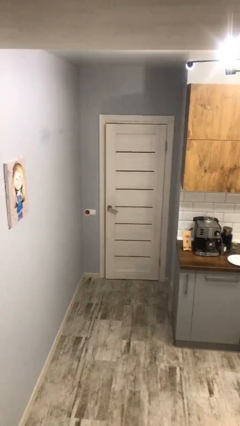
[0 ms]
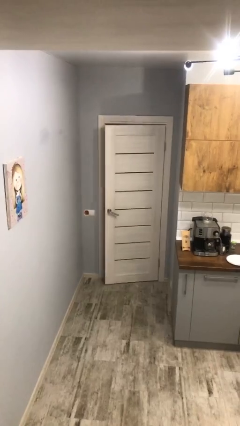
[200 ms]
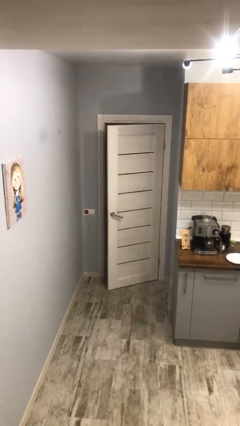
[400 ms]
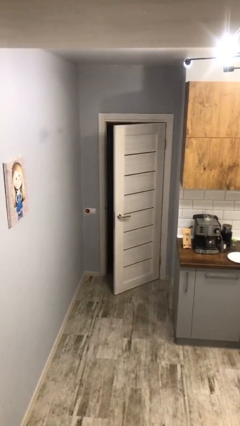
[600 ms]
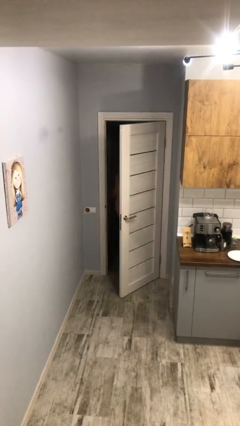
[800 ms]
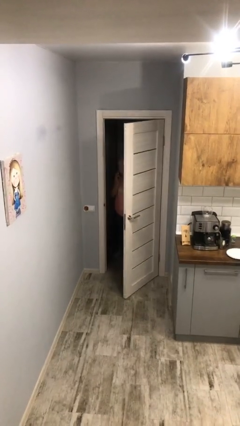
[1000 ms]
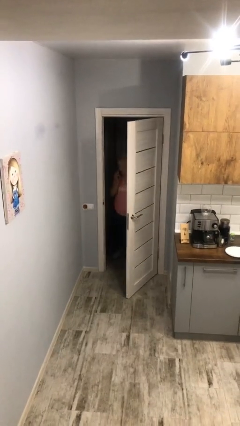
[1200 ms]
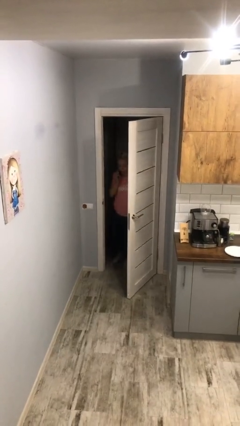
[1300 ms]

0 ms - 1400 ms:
person opens facility door

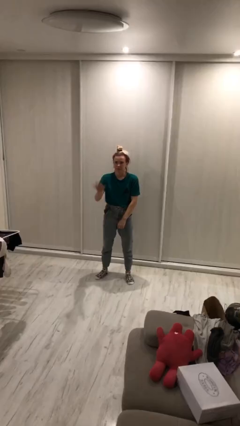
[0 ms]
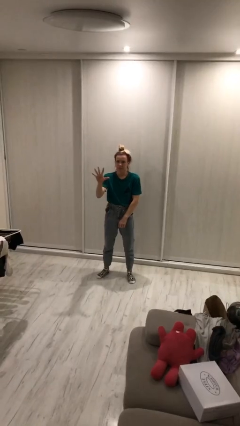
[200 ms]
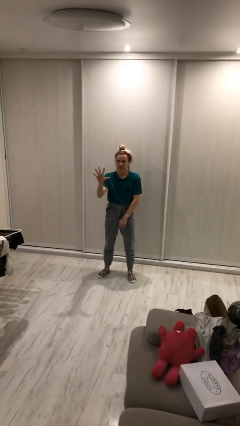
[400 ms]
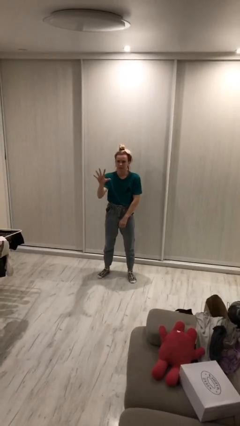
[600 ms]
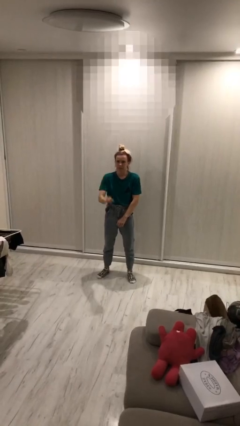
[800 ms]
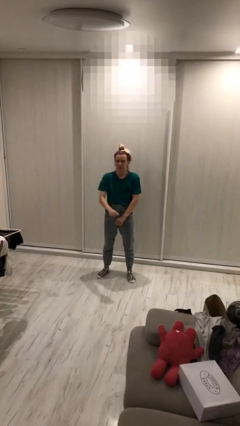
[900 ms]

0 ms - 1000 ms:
person gestures number five

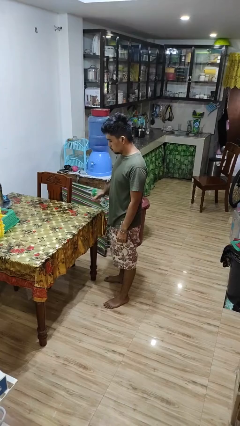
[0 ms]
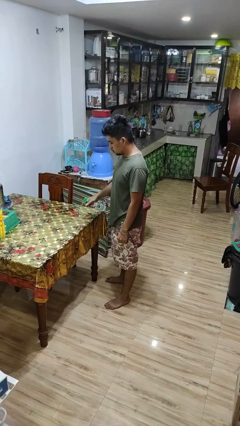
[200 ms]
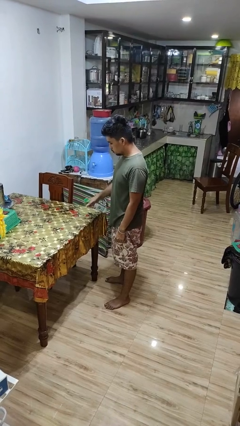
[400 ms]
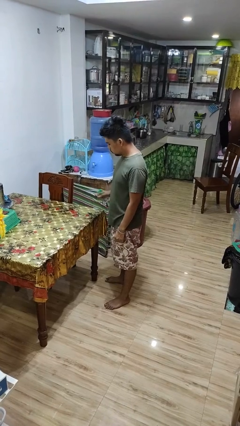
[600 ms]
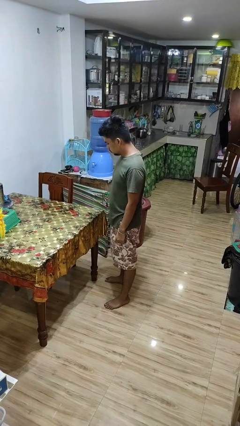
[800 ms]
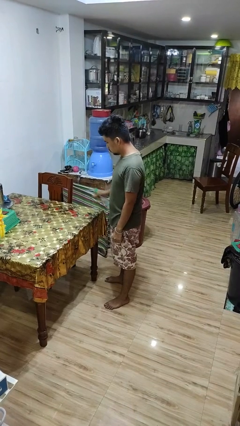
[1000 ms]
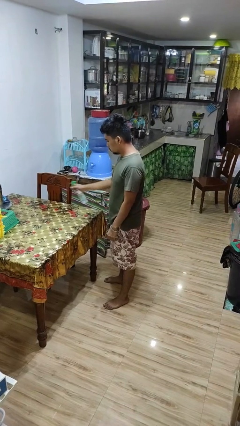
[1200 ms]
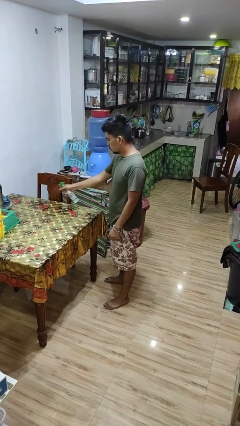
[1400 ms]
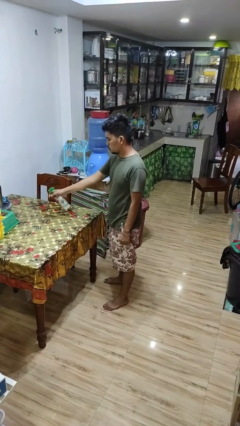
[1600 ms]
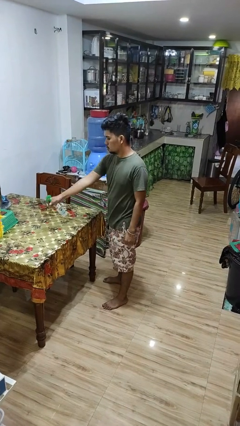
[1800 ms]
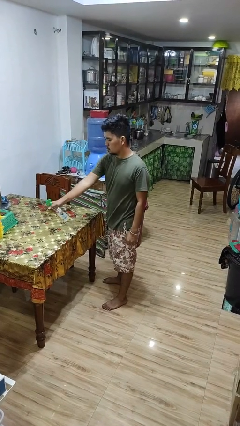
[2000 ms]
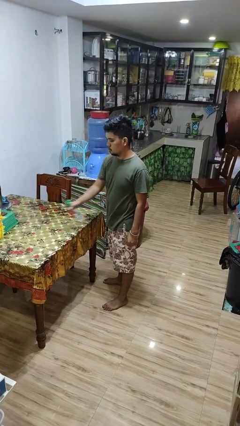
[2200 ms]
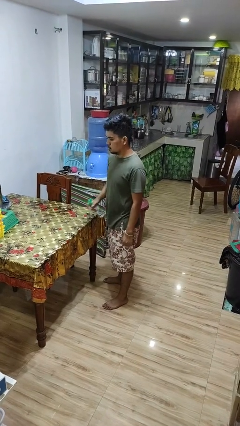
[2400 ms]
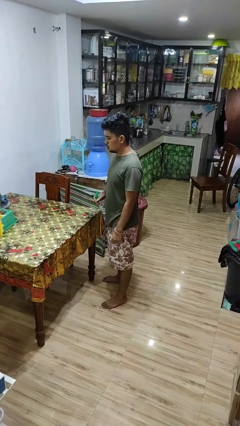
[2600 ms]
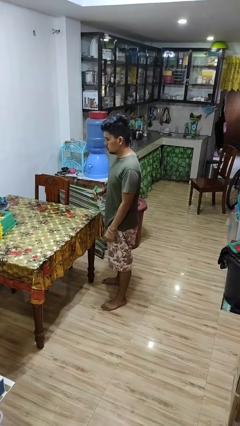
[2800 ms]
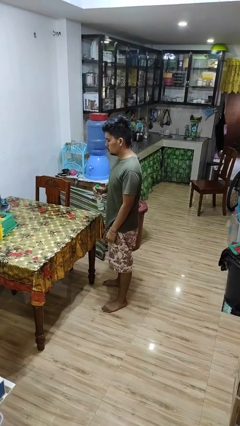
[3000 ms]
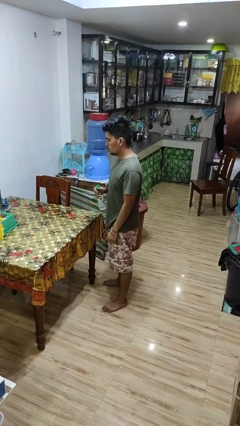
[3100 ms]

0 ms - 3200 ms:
person sprays from bottle

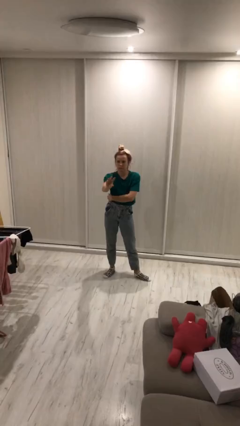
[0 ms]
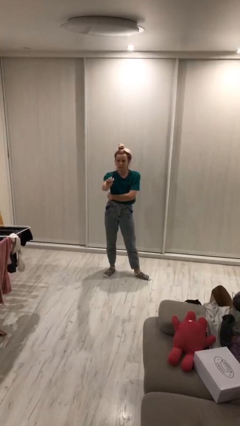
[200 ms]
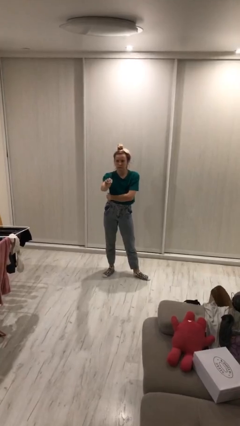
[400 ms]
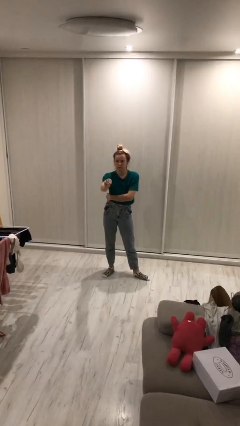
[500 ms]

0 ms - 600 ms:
person gestures zoom out

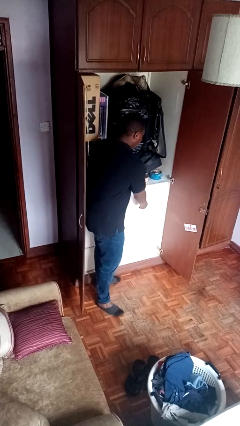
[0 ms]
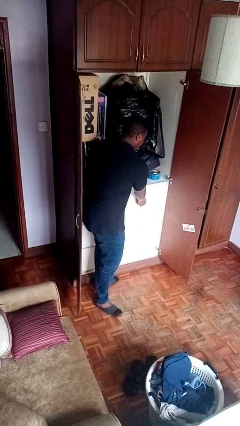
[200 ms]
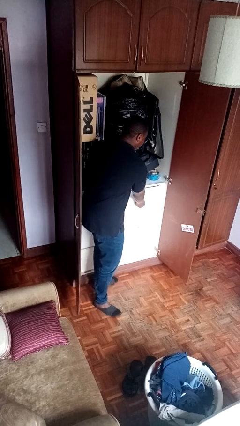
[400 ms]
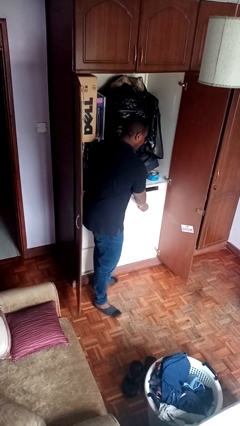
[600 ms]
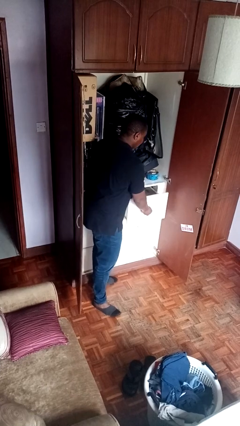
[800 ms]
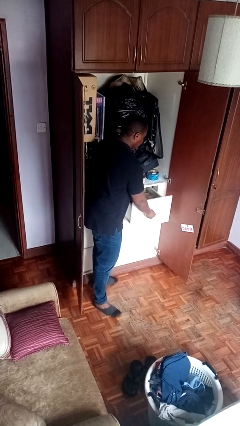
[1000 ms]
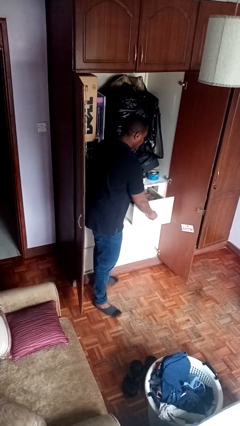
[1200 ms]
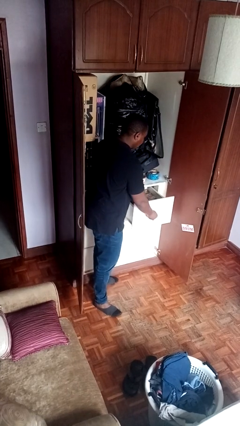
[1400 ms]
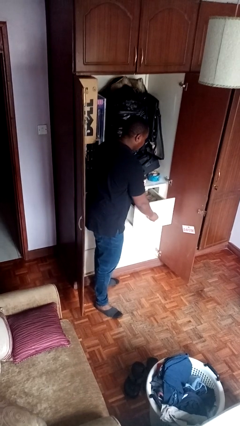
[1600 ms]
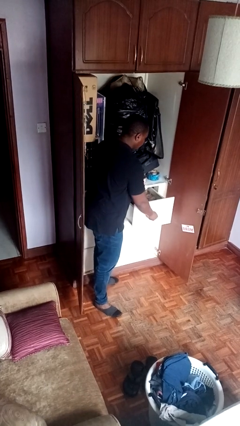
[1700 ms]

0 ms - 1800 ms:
person opens dresser drawer

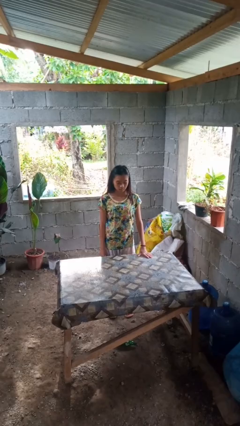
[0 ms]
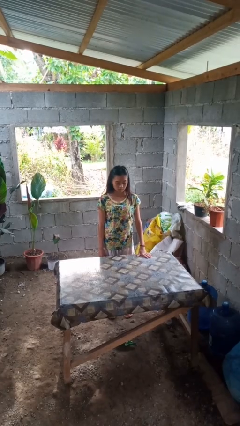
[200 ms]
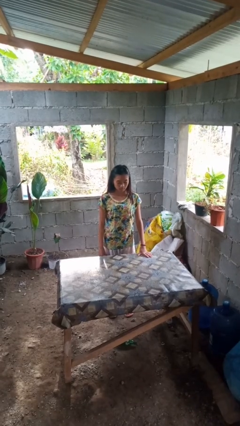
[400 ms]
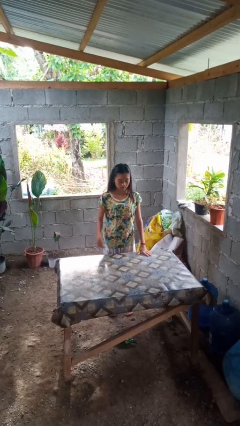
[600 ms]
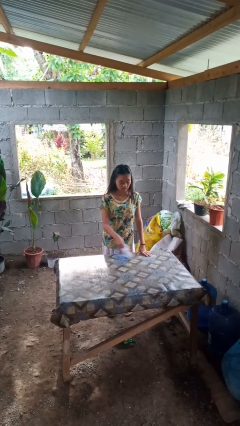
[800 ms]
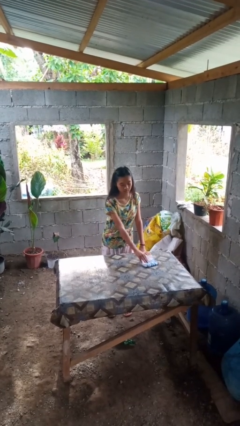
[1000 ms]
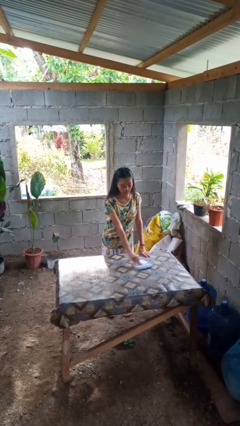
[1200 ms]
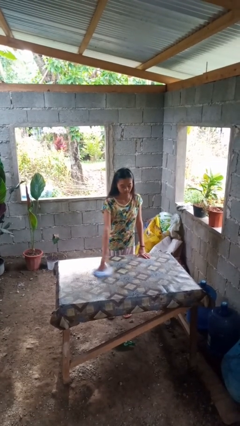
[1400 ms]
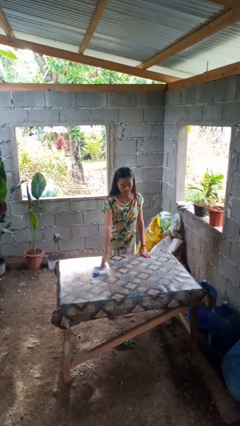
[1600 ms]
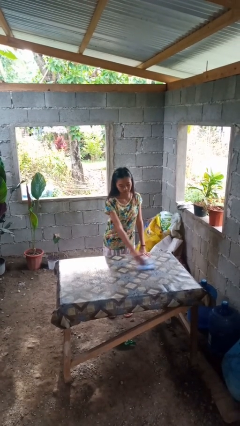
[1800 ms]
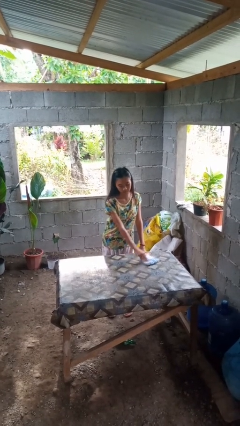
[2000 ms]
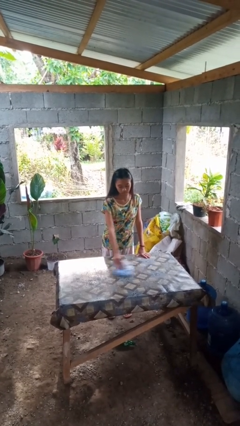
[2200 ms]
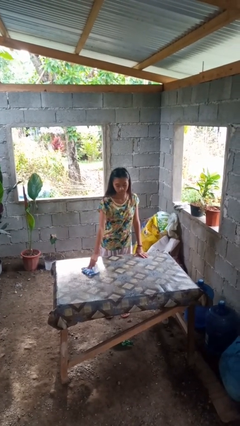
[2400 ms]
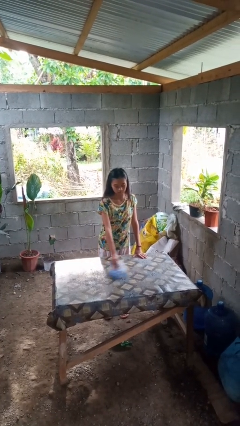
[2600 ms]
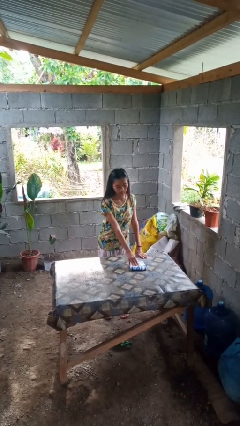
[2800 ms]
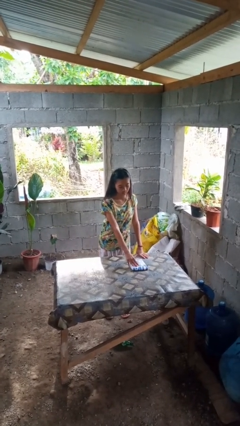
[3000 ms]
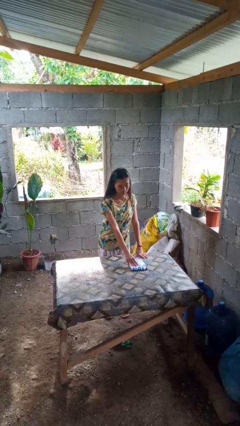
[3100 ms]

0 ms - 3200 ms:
person cleans table with rag

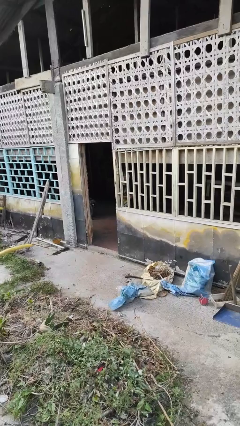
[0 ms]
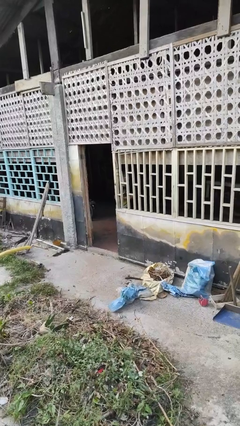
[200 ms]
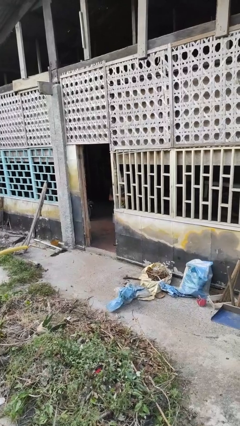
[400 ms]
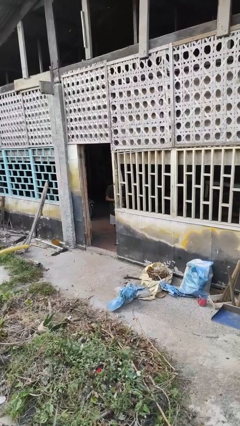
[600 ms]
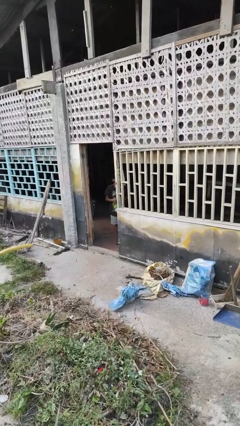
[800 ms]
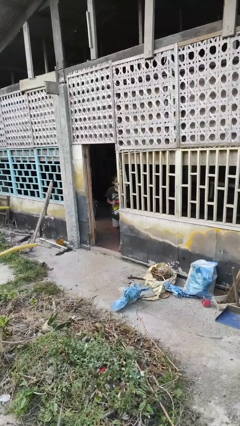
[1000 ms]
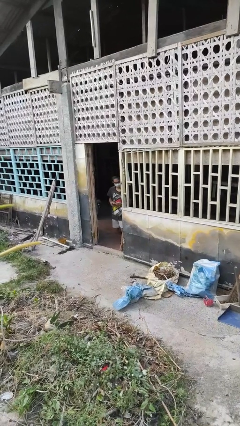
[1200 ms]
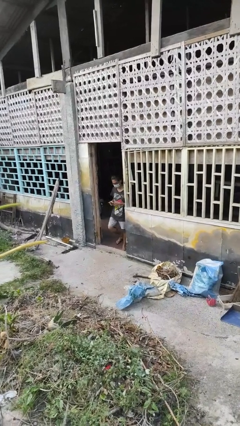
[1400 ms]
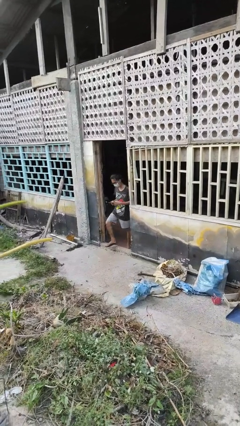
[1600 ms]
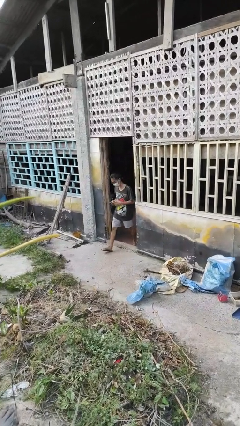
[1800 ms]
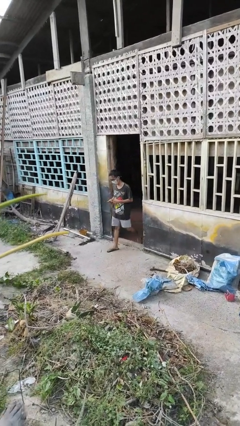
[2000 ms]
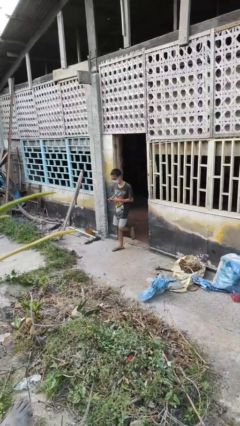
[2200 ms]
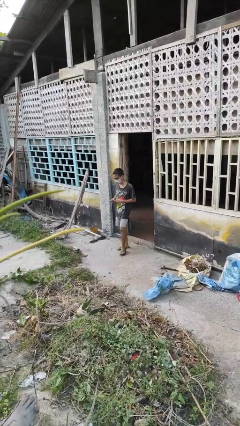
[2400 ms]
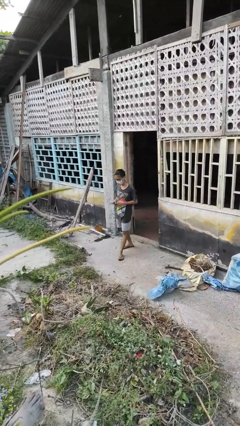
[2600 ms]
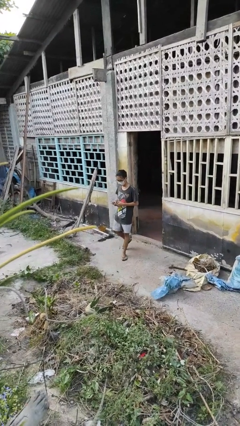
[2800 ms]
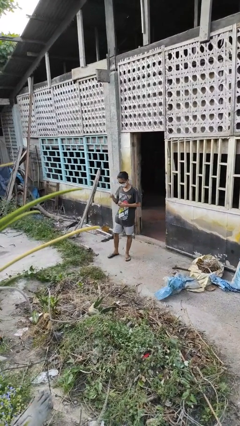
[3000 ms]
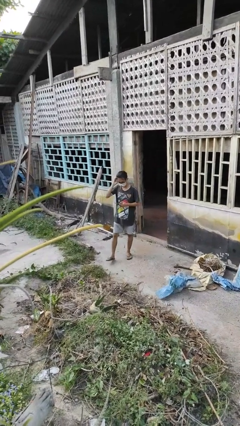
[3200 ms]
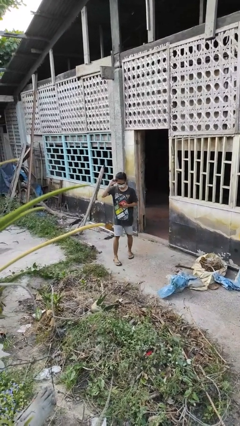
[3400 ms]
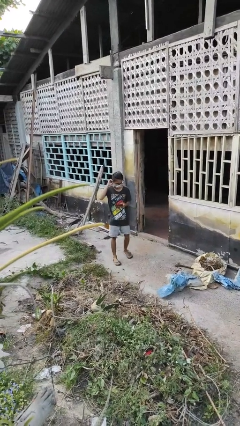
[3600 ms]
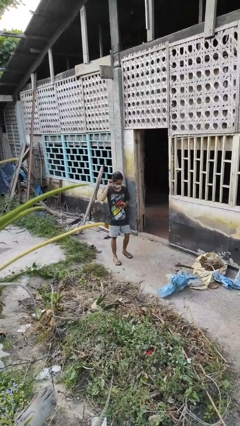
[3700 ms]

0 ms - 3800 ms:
person enters scene through structure

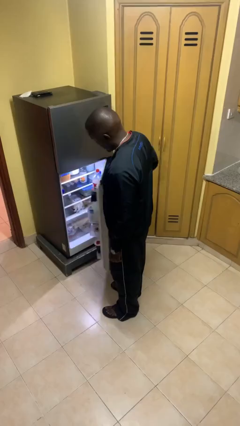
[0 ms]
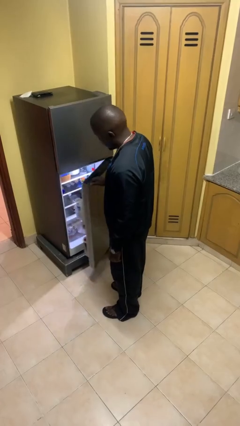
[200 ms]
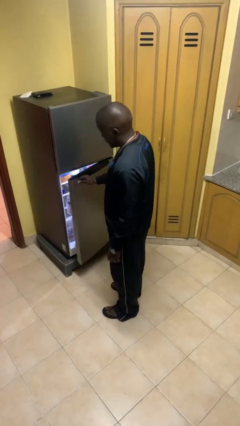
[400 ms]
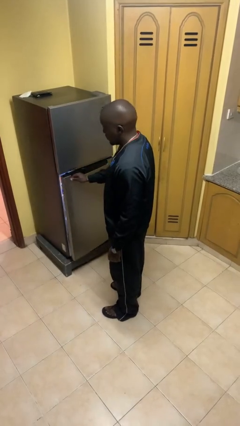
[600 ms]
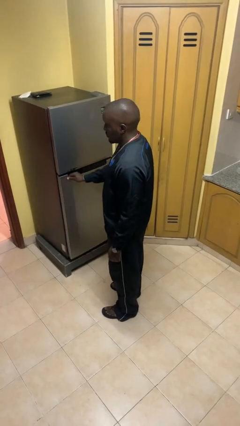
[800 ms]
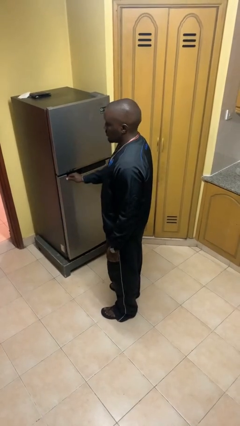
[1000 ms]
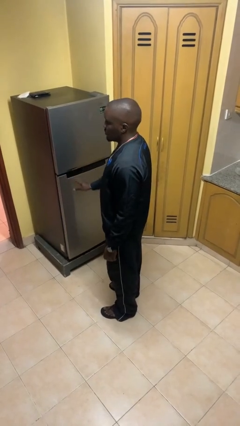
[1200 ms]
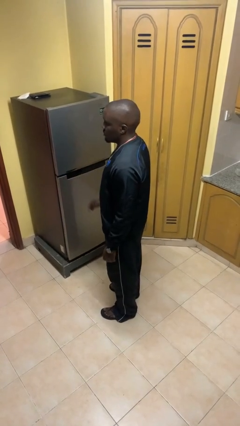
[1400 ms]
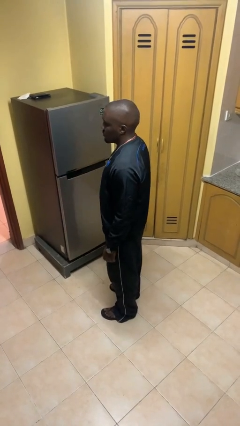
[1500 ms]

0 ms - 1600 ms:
person closes refrigerator

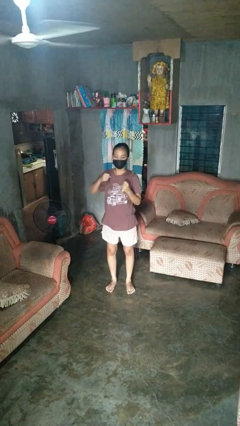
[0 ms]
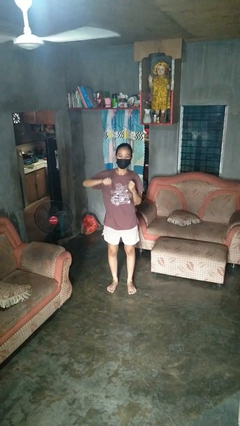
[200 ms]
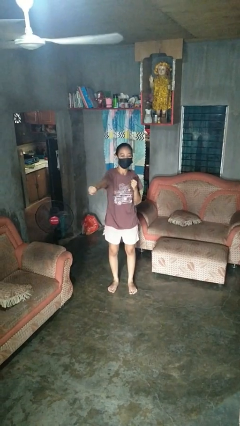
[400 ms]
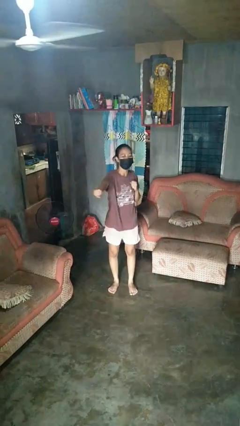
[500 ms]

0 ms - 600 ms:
person punches
